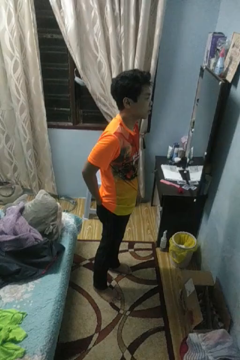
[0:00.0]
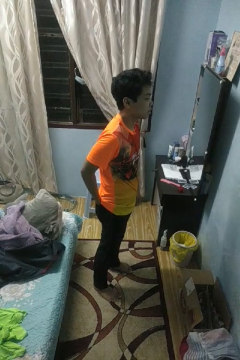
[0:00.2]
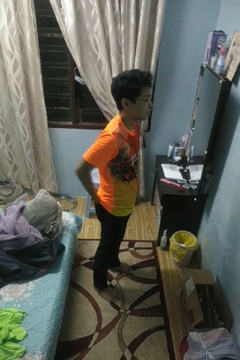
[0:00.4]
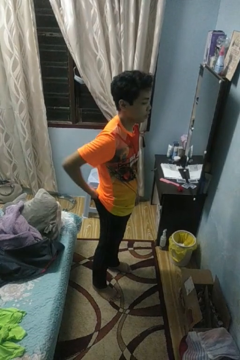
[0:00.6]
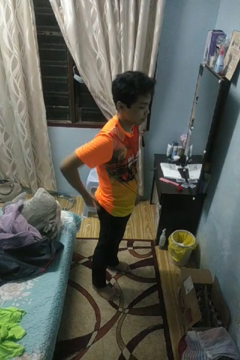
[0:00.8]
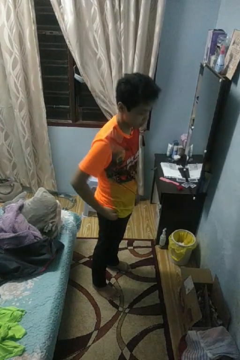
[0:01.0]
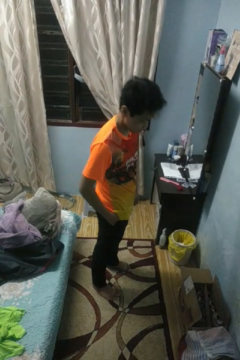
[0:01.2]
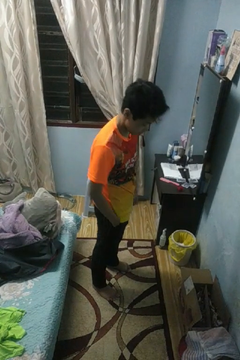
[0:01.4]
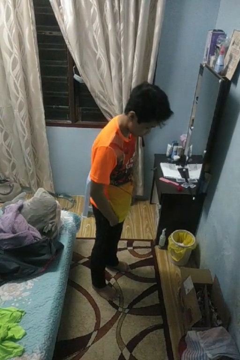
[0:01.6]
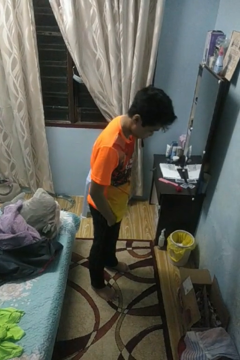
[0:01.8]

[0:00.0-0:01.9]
person puts hands in back pockets

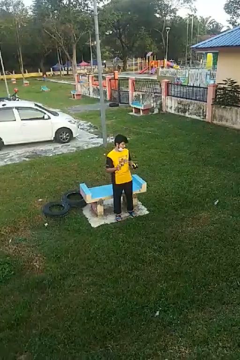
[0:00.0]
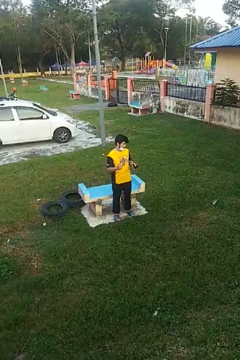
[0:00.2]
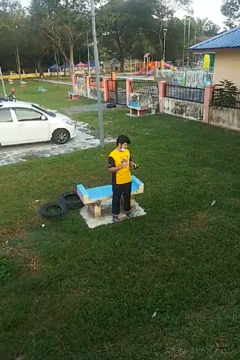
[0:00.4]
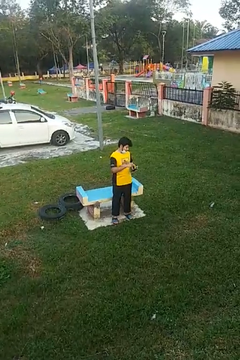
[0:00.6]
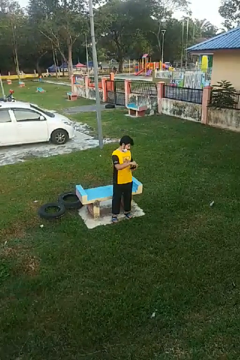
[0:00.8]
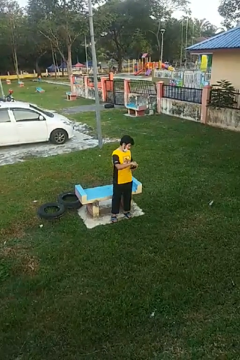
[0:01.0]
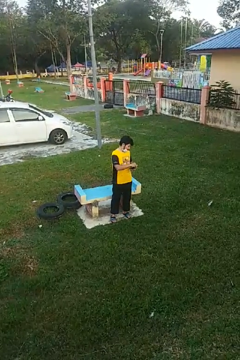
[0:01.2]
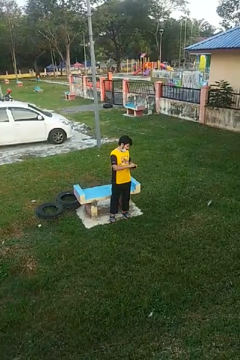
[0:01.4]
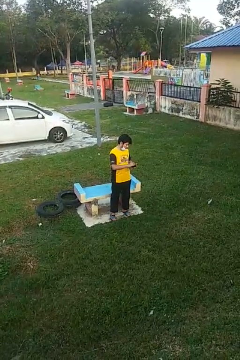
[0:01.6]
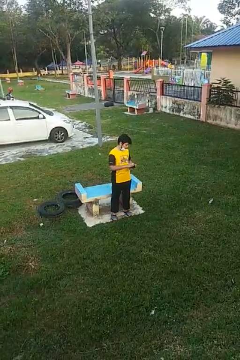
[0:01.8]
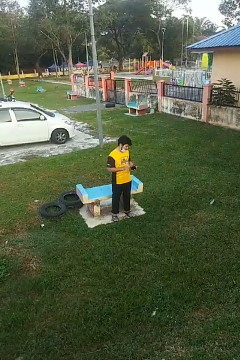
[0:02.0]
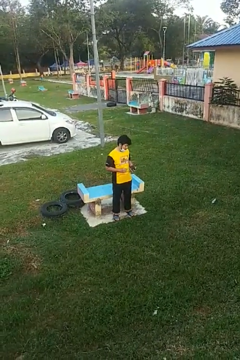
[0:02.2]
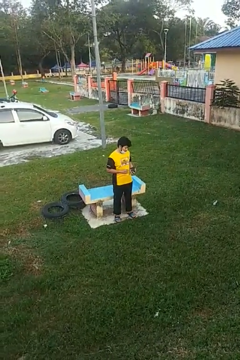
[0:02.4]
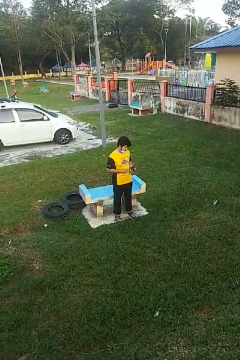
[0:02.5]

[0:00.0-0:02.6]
person puts object into purse

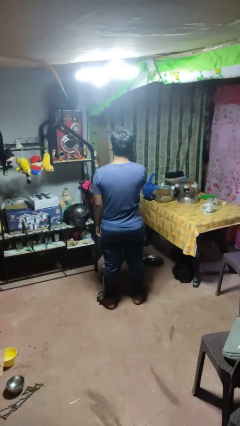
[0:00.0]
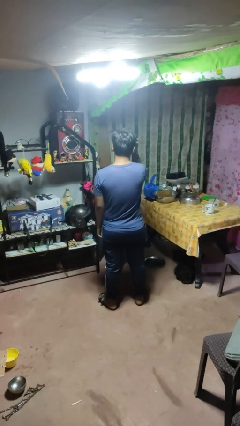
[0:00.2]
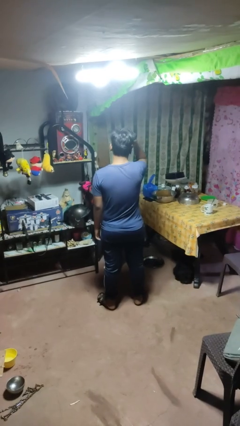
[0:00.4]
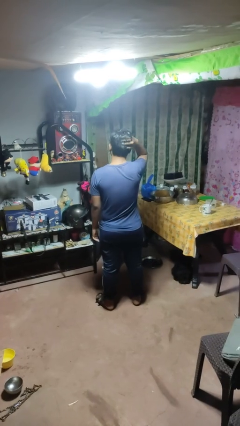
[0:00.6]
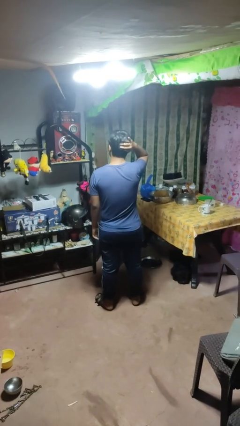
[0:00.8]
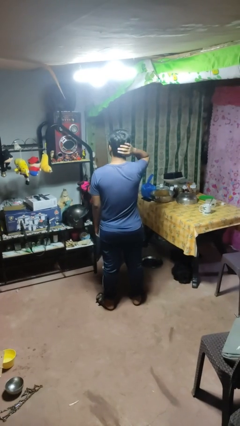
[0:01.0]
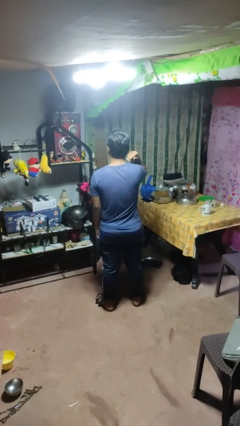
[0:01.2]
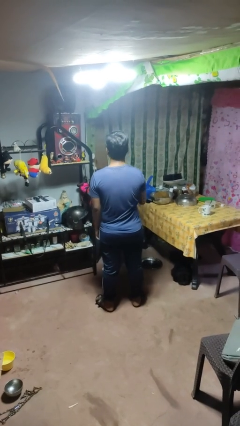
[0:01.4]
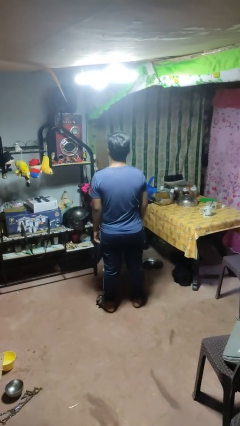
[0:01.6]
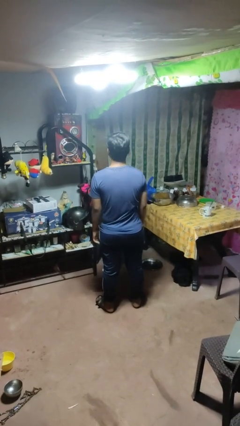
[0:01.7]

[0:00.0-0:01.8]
person strokes hair

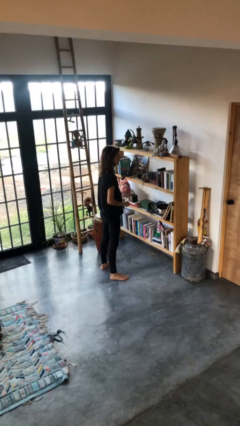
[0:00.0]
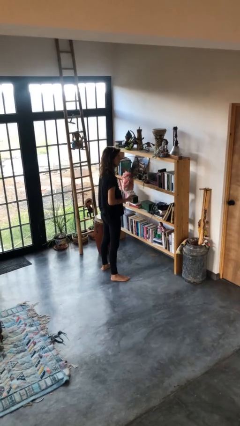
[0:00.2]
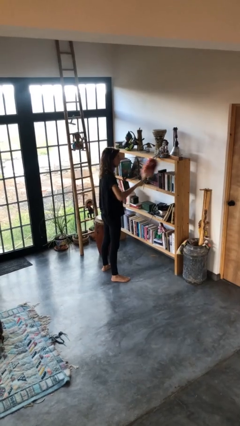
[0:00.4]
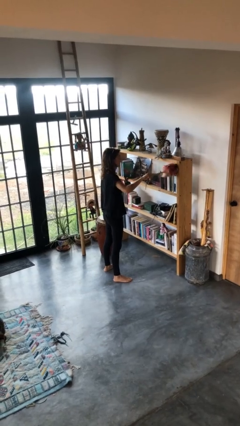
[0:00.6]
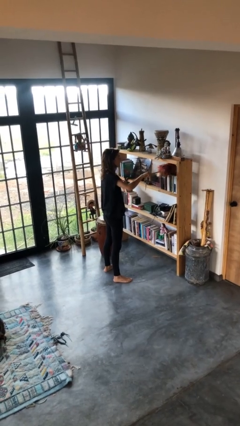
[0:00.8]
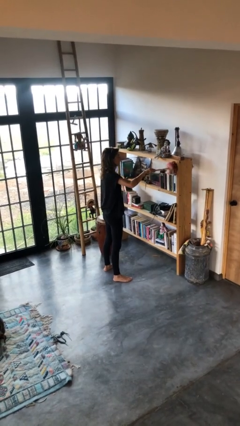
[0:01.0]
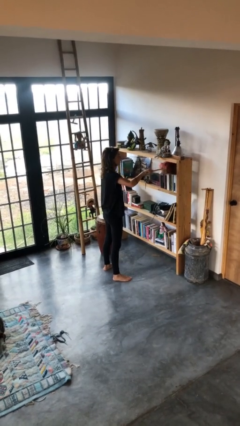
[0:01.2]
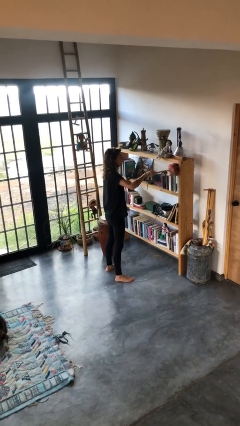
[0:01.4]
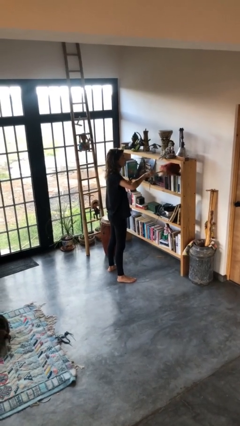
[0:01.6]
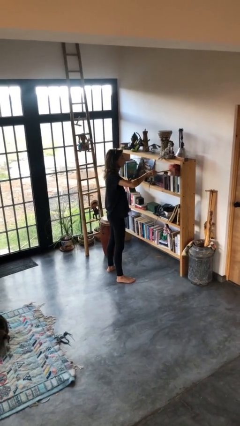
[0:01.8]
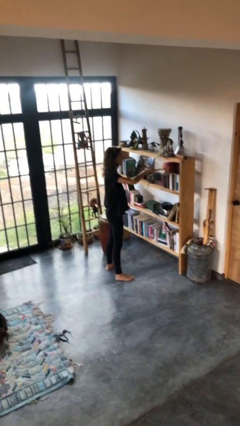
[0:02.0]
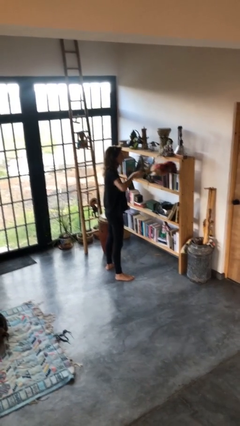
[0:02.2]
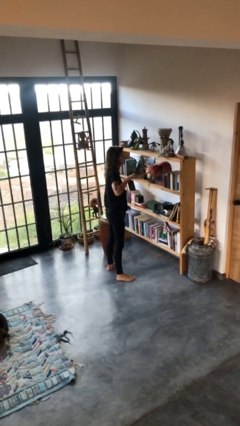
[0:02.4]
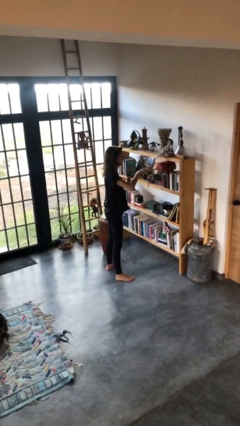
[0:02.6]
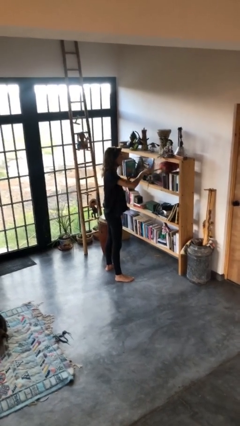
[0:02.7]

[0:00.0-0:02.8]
person dusts furniture

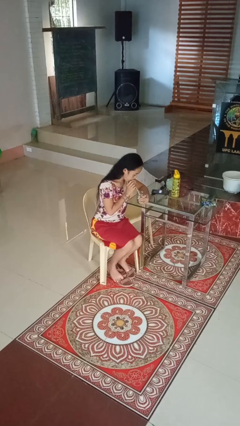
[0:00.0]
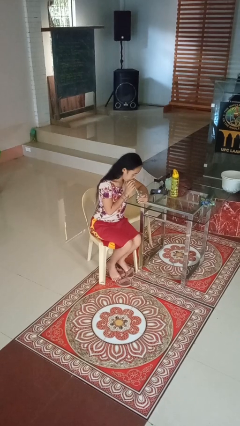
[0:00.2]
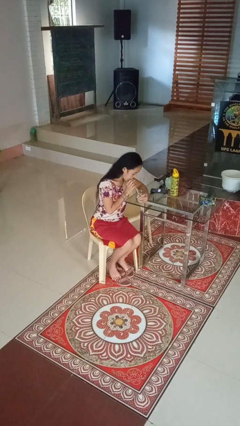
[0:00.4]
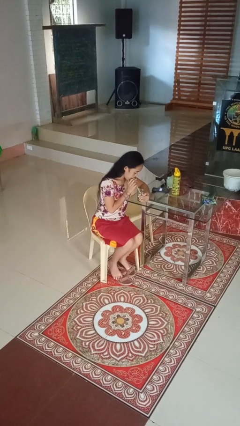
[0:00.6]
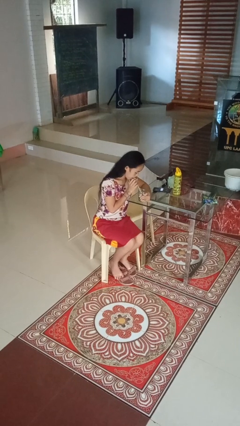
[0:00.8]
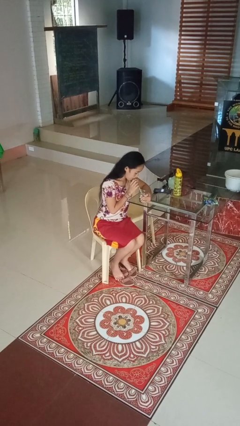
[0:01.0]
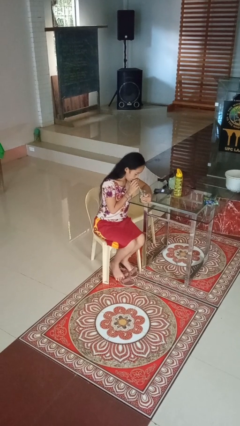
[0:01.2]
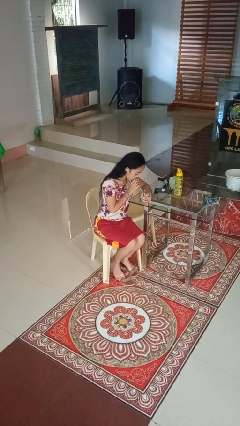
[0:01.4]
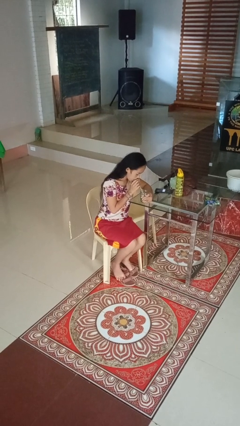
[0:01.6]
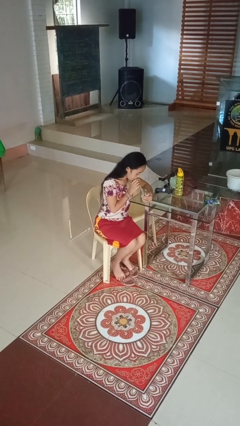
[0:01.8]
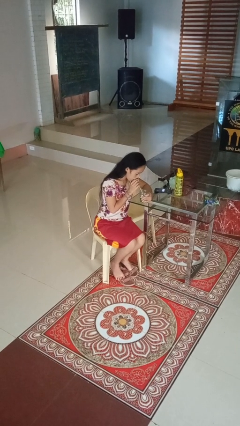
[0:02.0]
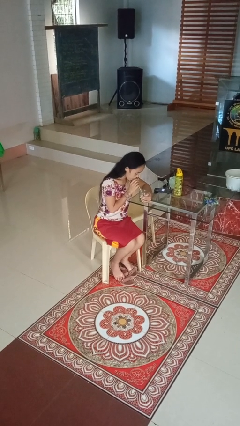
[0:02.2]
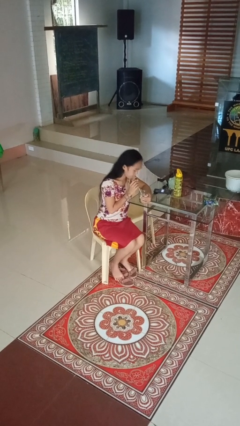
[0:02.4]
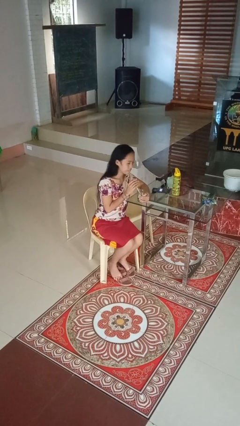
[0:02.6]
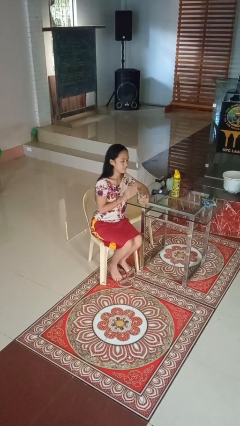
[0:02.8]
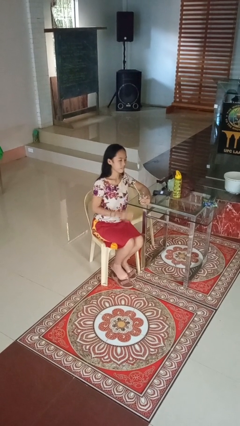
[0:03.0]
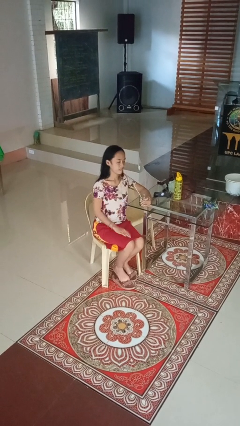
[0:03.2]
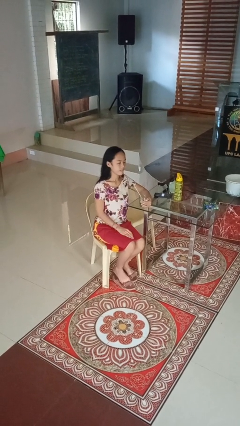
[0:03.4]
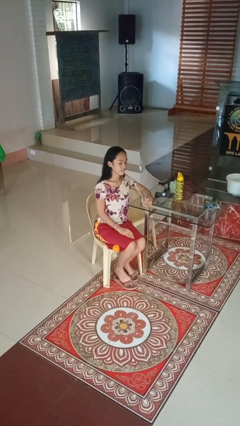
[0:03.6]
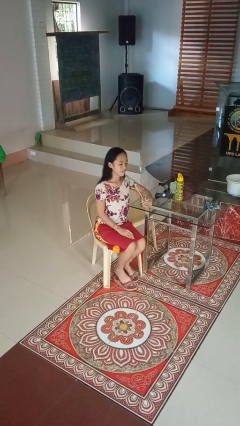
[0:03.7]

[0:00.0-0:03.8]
person drinks from straw

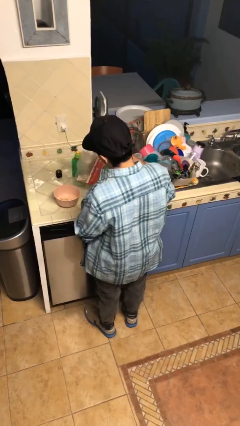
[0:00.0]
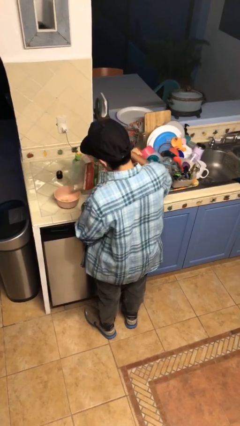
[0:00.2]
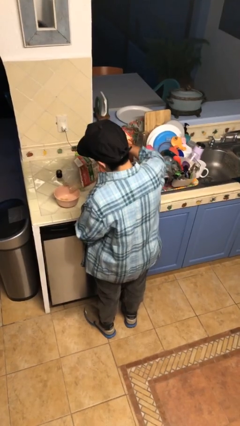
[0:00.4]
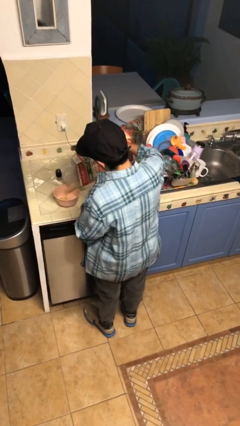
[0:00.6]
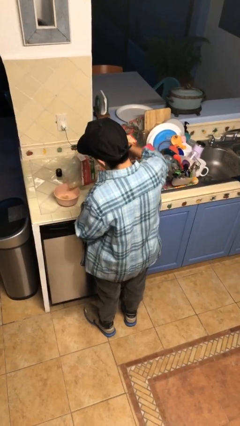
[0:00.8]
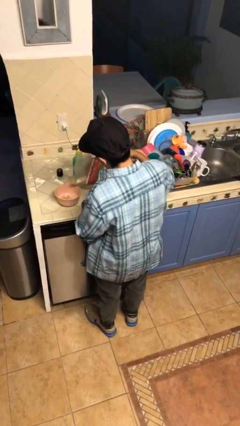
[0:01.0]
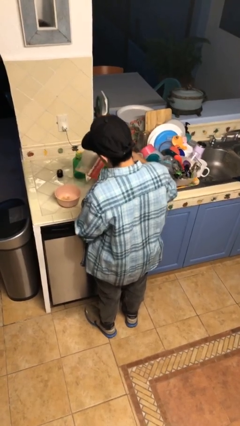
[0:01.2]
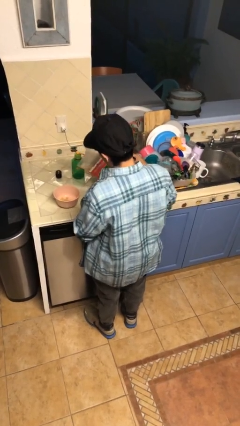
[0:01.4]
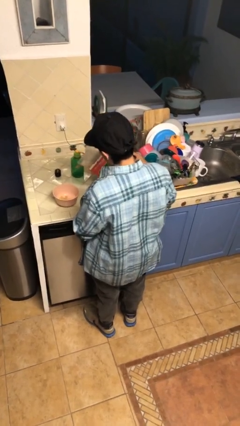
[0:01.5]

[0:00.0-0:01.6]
person pours into bowl

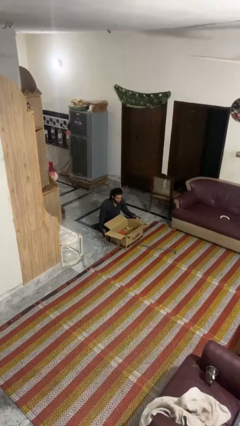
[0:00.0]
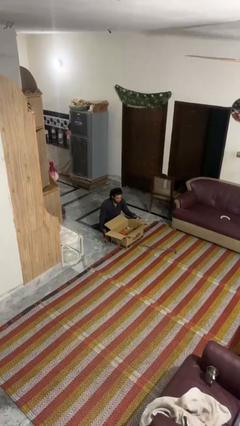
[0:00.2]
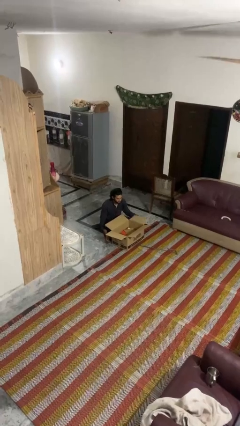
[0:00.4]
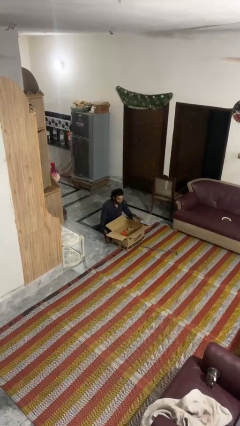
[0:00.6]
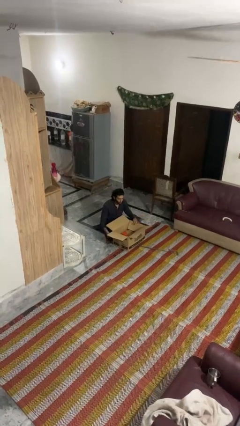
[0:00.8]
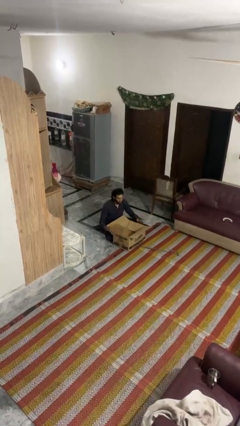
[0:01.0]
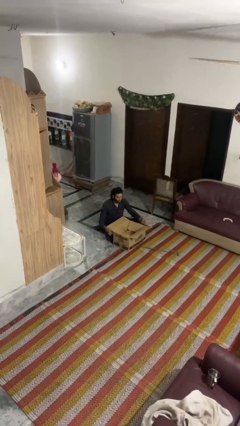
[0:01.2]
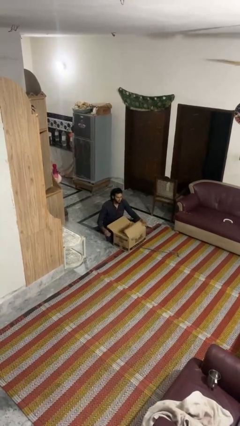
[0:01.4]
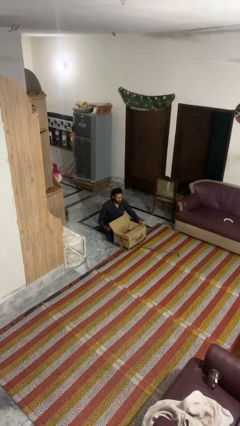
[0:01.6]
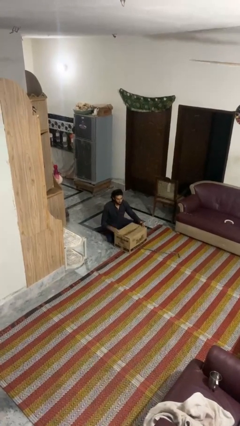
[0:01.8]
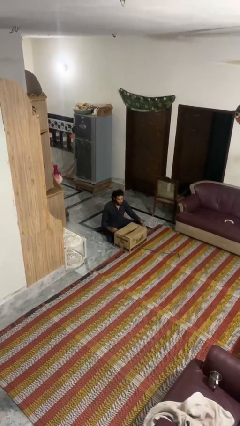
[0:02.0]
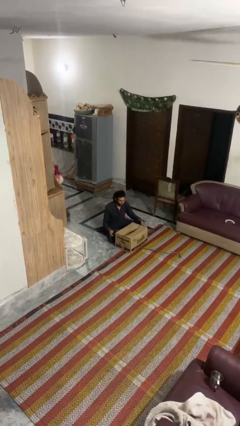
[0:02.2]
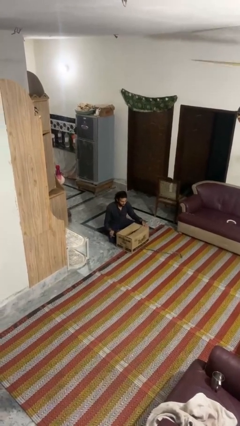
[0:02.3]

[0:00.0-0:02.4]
person closes box

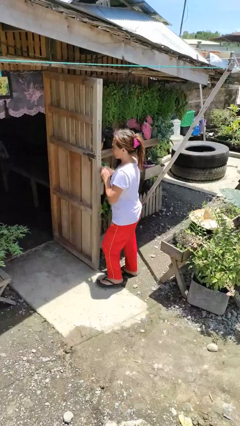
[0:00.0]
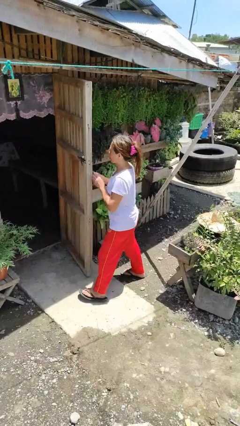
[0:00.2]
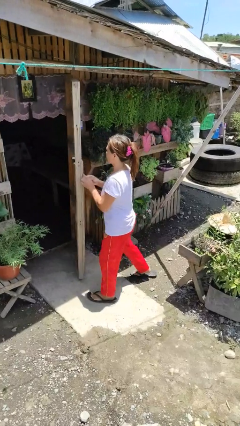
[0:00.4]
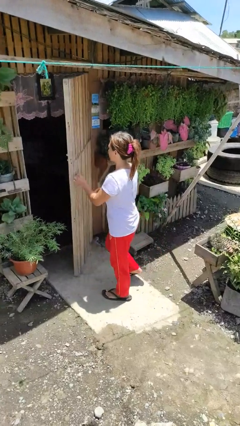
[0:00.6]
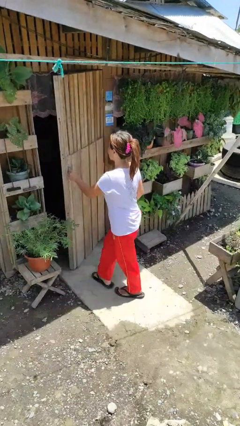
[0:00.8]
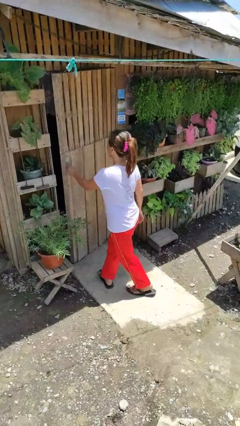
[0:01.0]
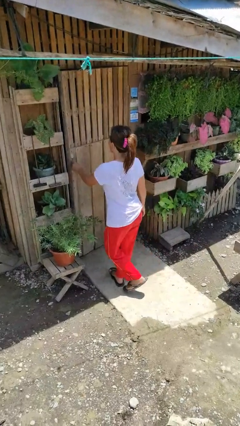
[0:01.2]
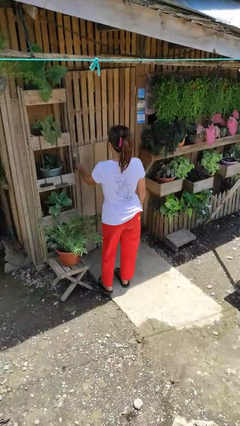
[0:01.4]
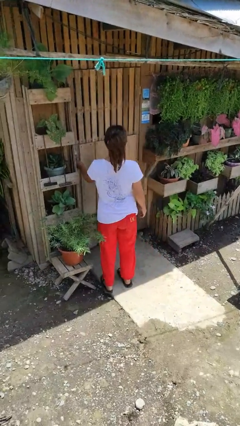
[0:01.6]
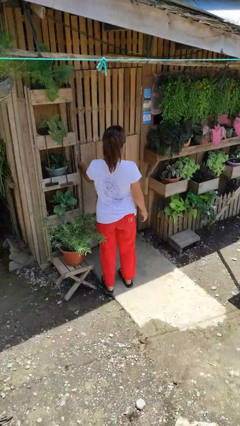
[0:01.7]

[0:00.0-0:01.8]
person closes facility door
